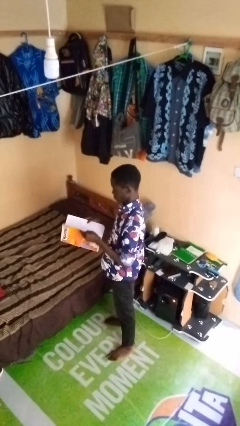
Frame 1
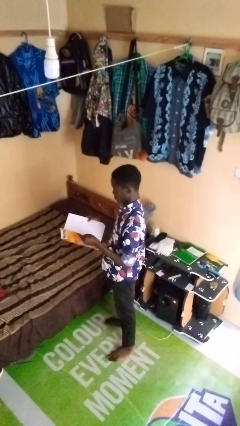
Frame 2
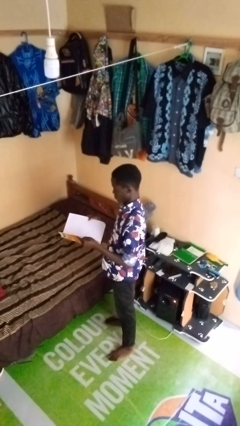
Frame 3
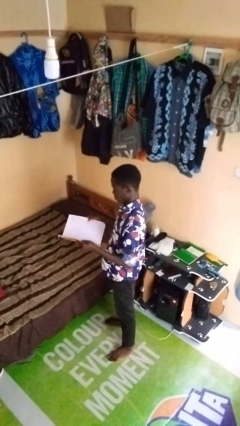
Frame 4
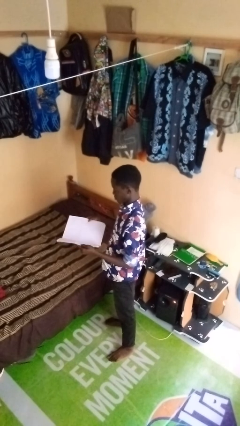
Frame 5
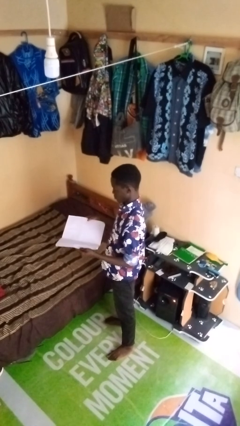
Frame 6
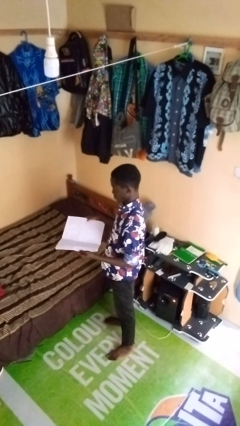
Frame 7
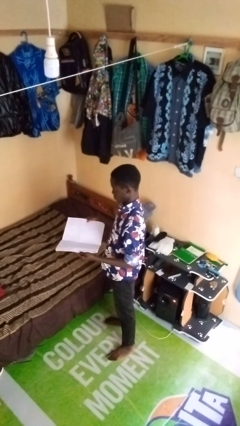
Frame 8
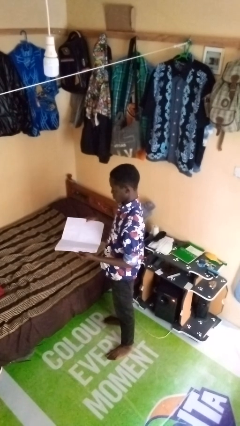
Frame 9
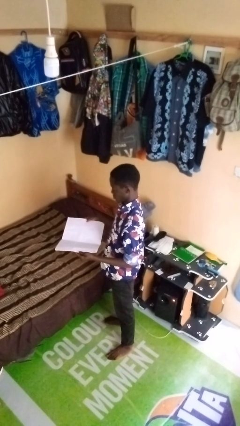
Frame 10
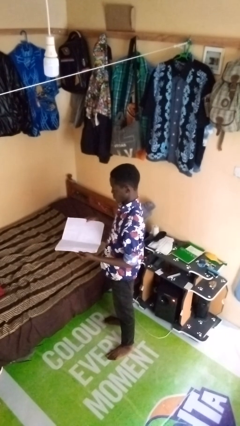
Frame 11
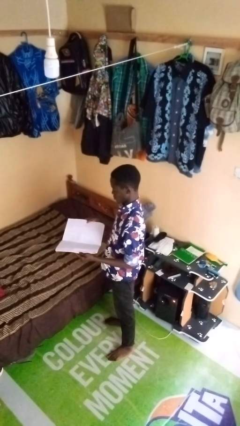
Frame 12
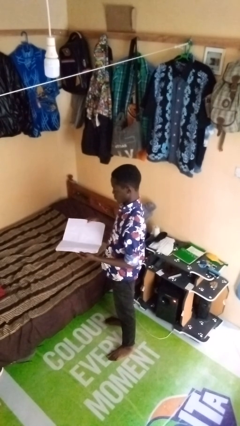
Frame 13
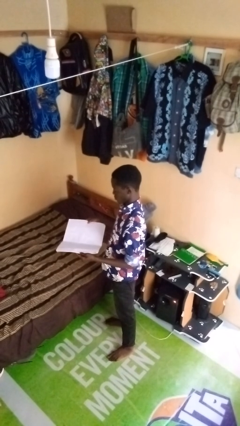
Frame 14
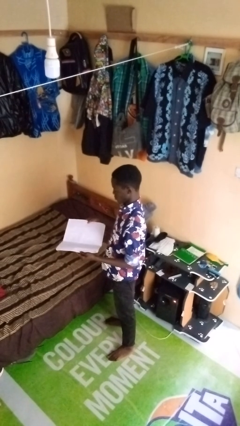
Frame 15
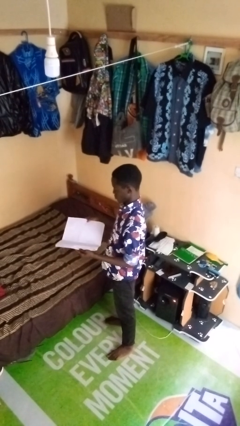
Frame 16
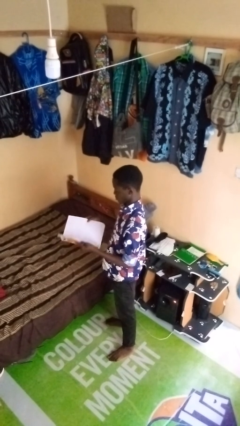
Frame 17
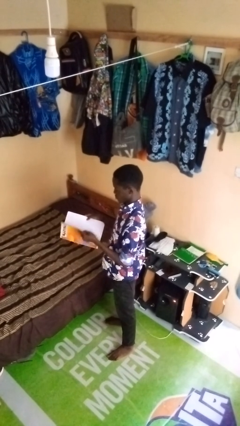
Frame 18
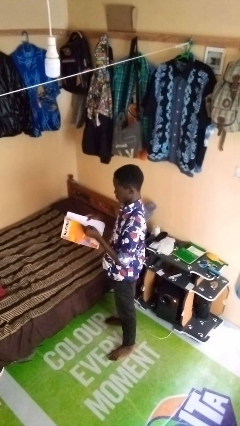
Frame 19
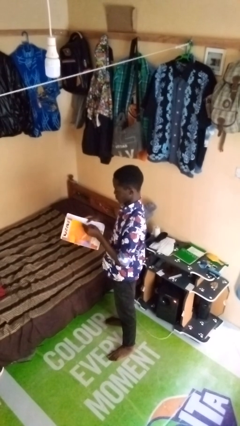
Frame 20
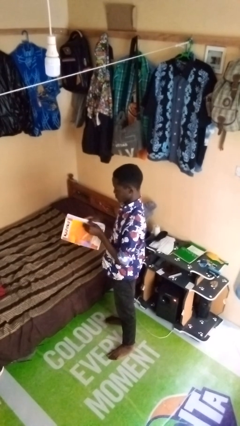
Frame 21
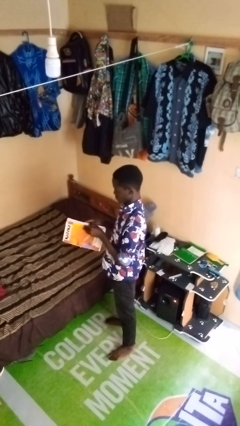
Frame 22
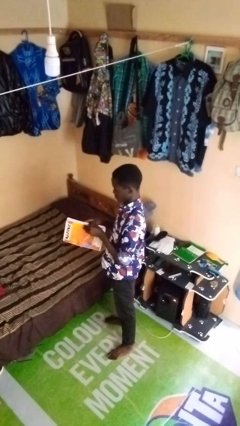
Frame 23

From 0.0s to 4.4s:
person reads book

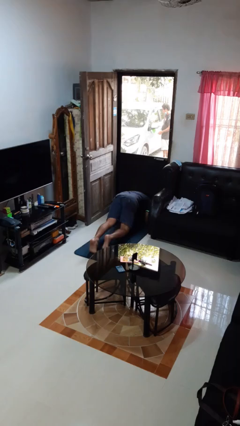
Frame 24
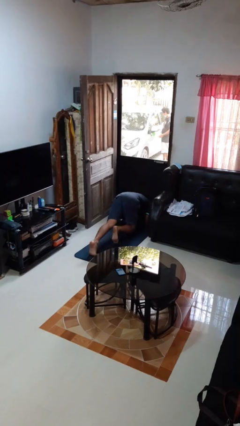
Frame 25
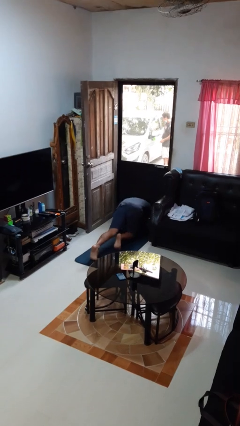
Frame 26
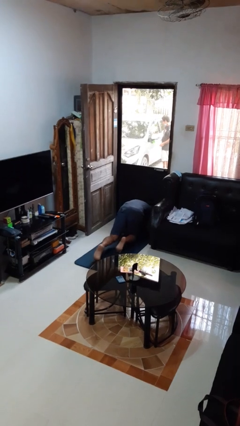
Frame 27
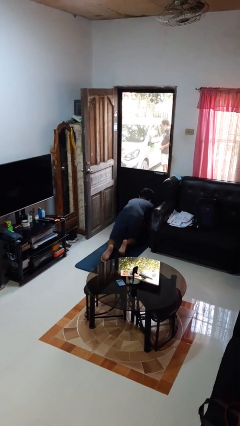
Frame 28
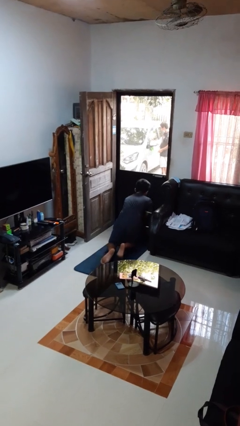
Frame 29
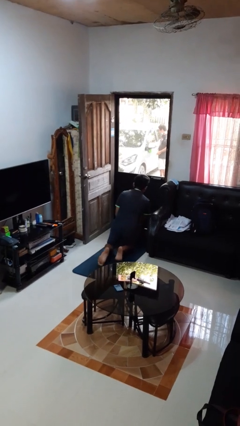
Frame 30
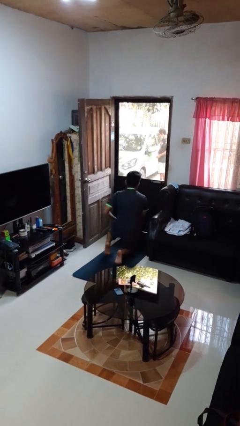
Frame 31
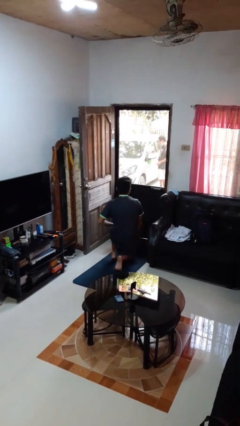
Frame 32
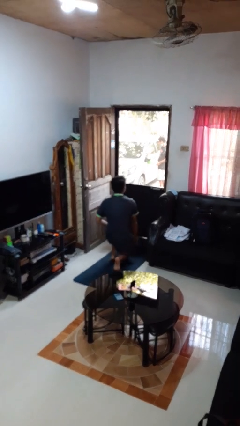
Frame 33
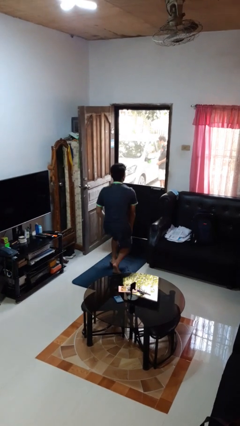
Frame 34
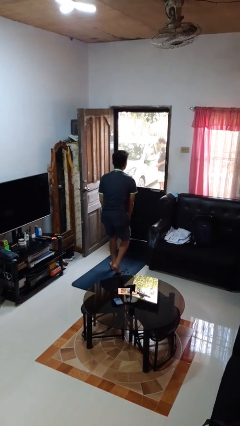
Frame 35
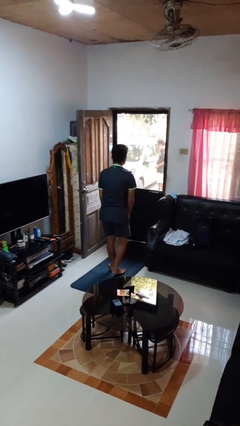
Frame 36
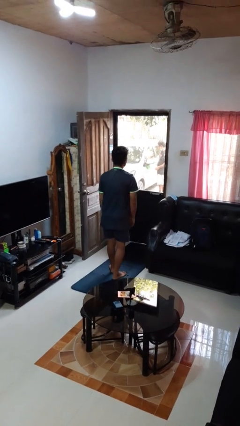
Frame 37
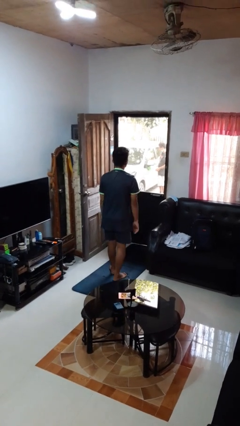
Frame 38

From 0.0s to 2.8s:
person stands up from floor

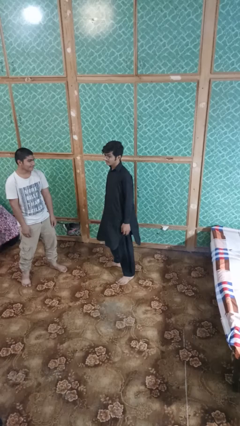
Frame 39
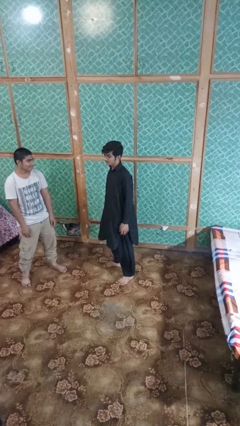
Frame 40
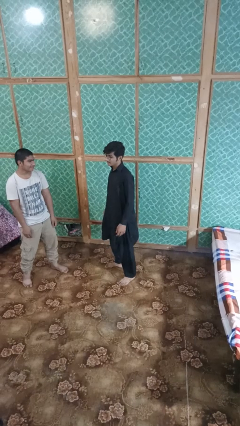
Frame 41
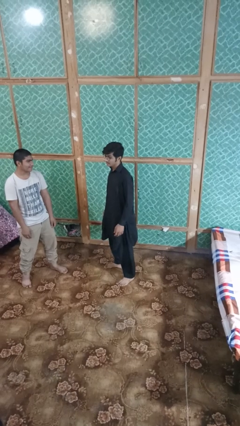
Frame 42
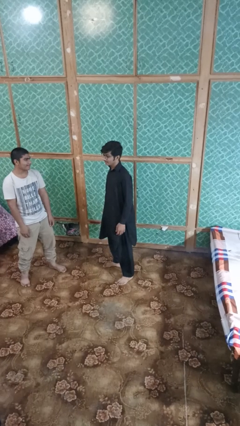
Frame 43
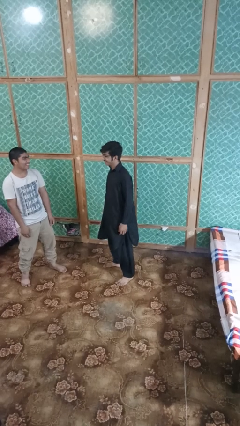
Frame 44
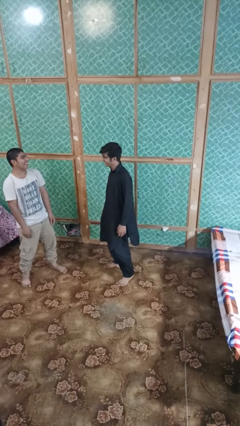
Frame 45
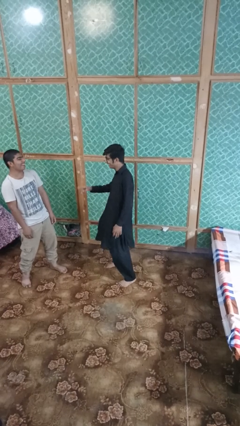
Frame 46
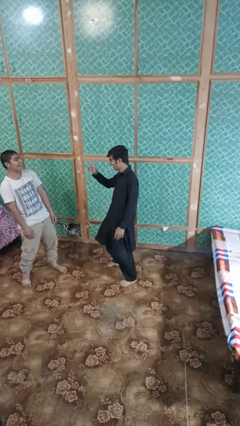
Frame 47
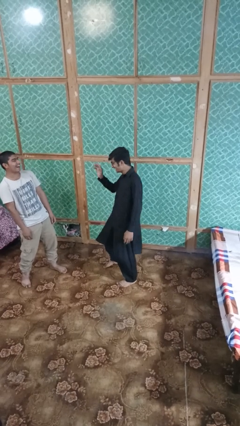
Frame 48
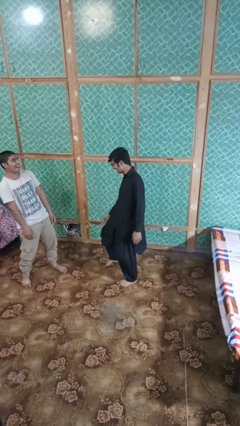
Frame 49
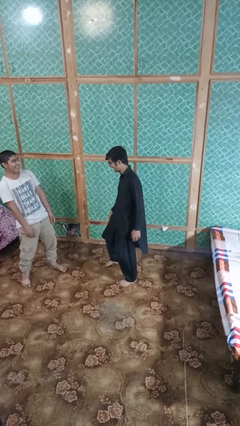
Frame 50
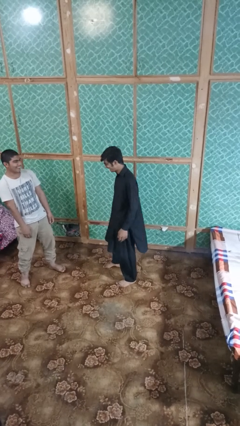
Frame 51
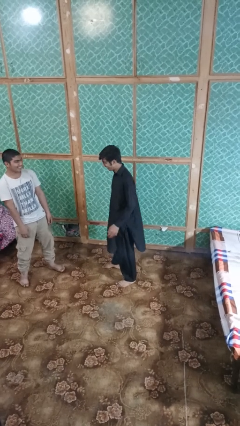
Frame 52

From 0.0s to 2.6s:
person laughs with person

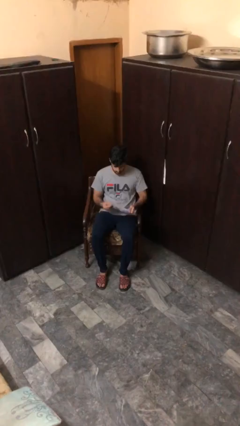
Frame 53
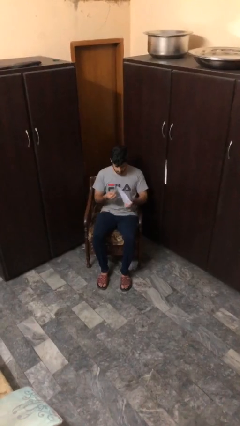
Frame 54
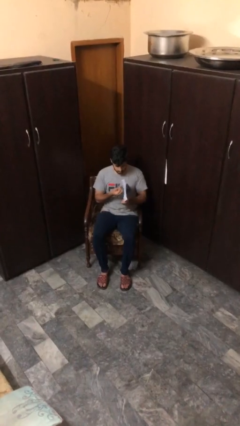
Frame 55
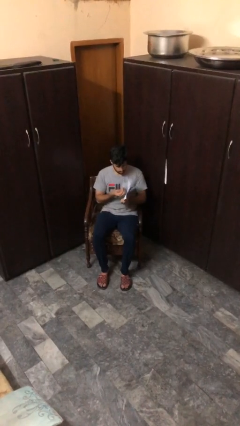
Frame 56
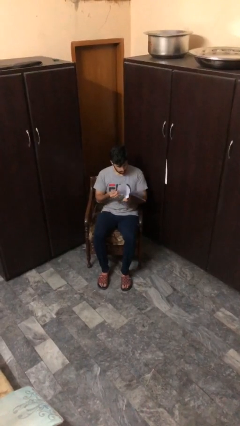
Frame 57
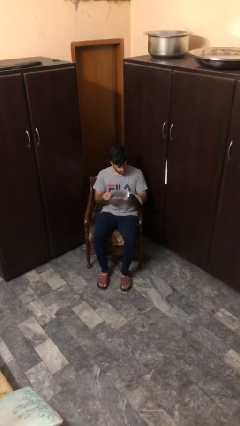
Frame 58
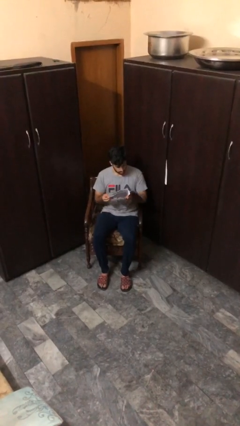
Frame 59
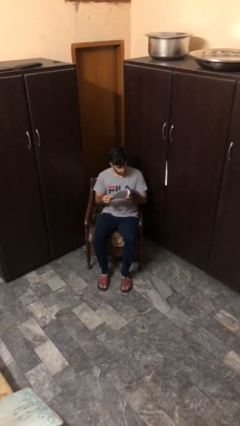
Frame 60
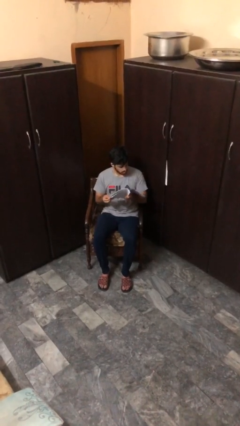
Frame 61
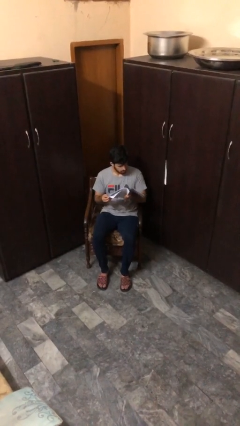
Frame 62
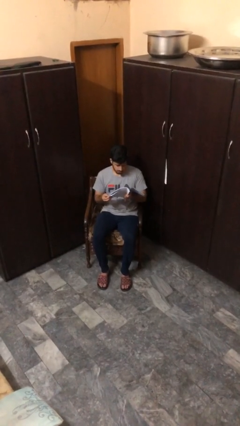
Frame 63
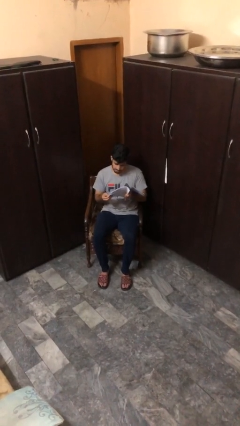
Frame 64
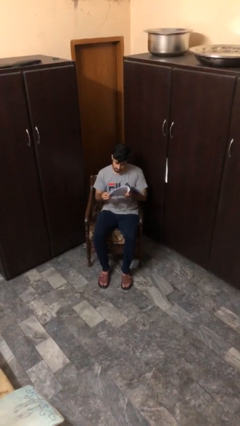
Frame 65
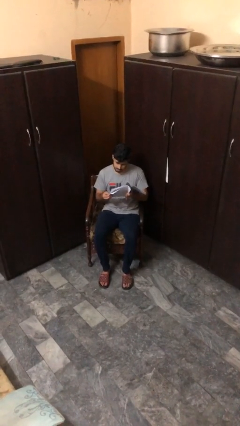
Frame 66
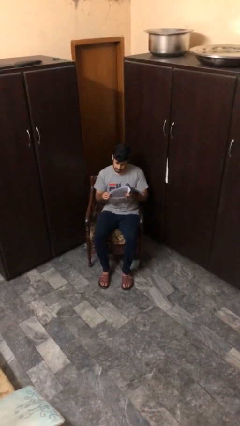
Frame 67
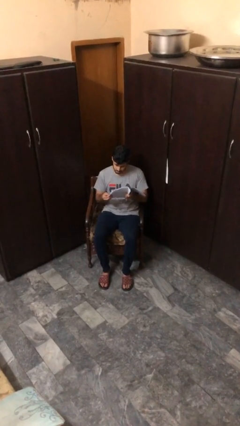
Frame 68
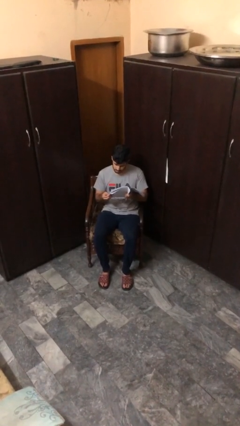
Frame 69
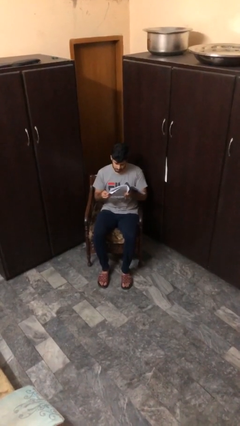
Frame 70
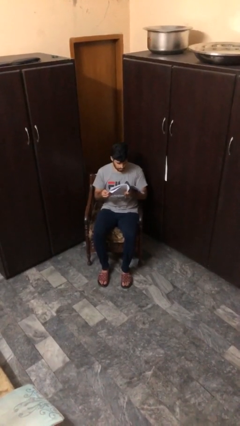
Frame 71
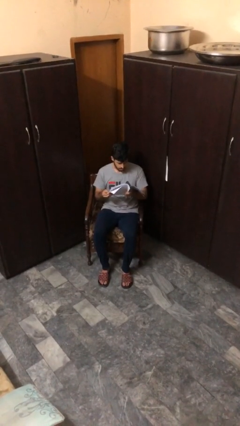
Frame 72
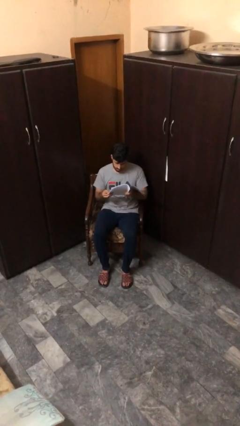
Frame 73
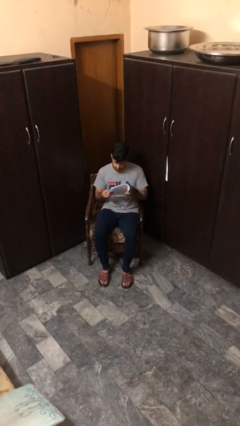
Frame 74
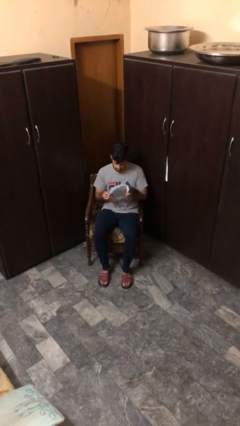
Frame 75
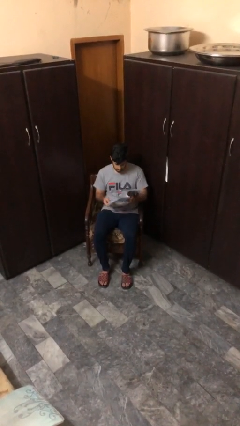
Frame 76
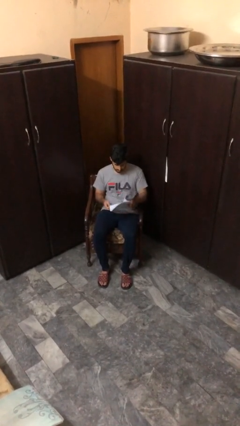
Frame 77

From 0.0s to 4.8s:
person reads magazine

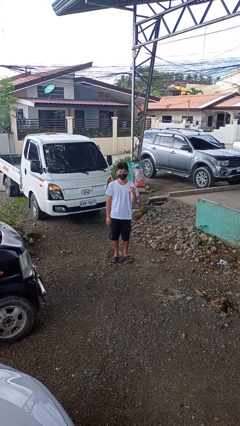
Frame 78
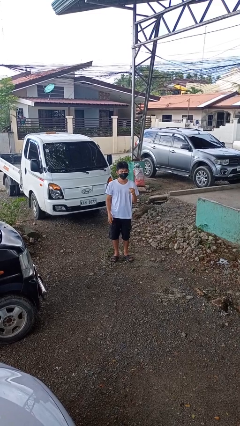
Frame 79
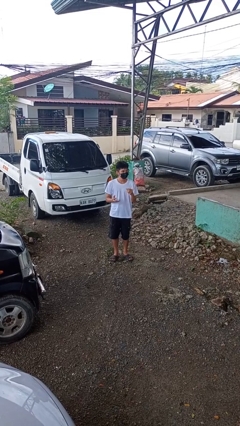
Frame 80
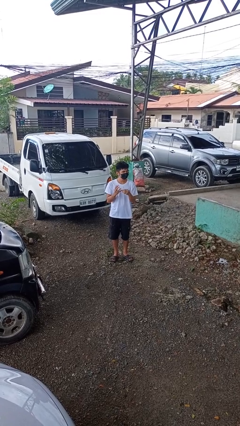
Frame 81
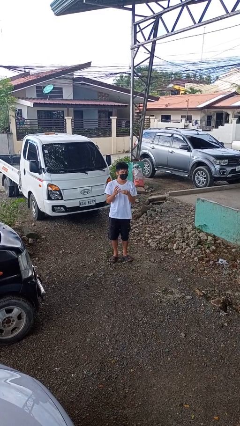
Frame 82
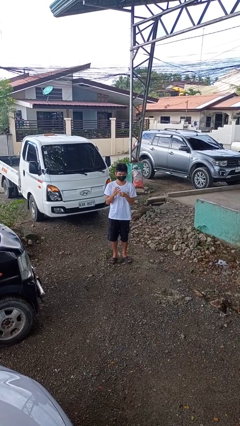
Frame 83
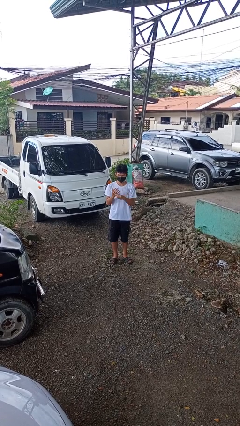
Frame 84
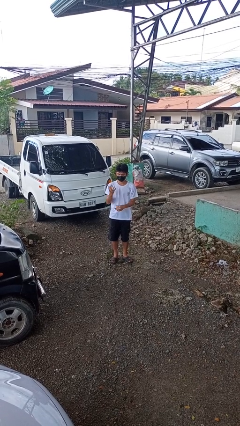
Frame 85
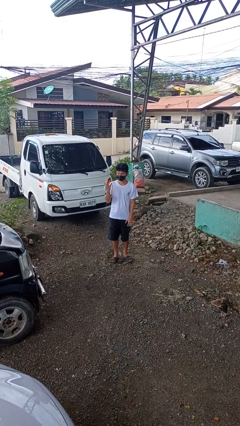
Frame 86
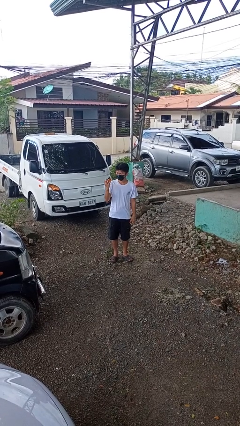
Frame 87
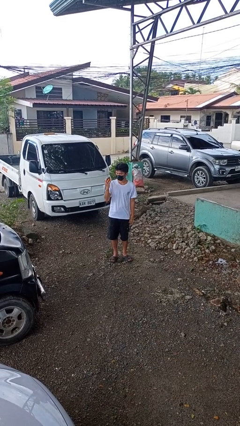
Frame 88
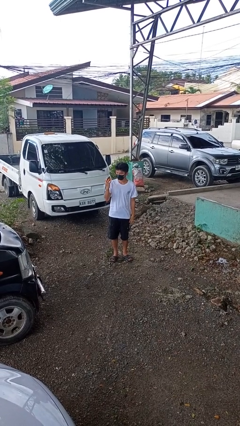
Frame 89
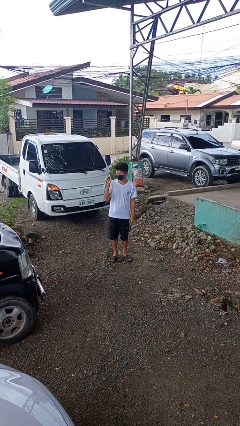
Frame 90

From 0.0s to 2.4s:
person puts on ring

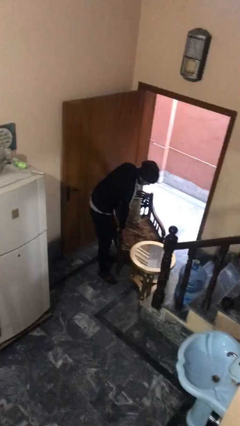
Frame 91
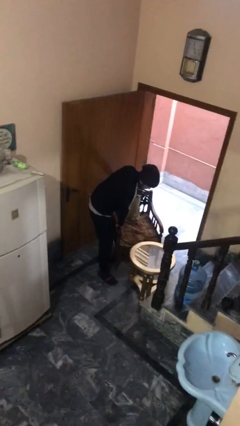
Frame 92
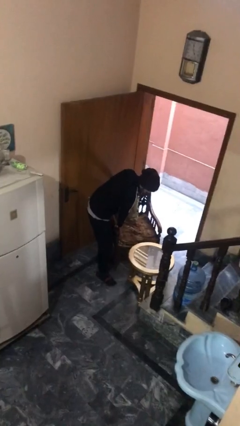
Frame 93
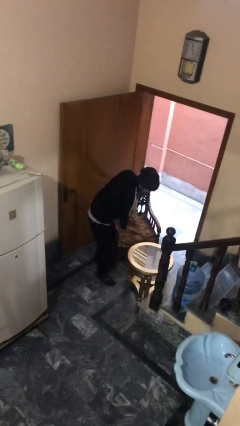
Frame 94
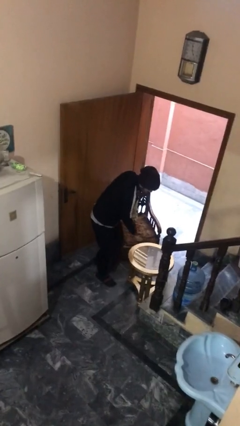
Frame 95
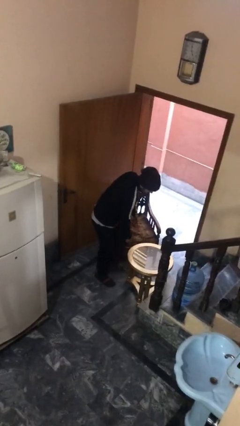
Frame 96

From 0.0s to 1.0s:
person stands up
